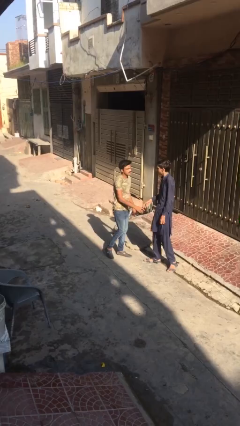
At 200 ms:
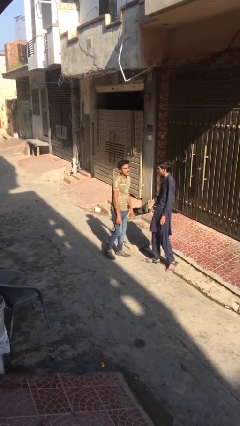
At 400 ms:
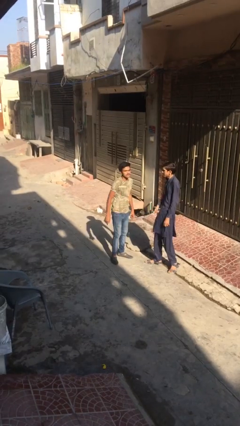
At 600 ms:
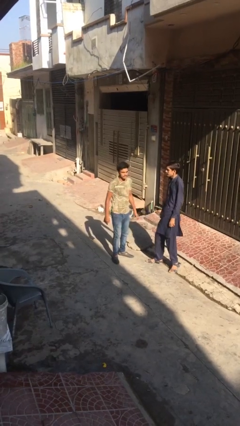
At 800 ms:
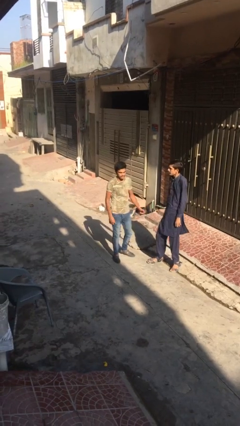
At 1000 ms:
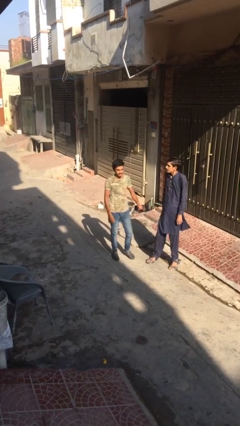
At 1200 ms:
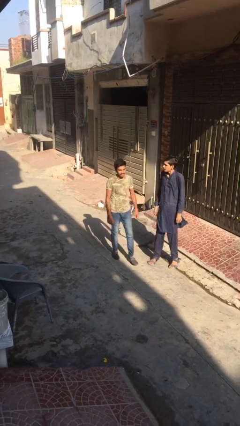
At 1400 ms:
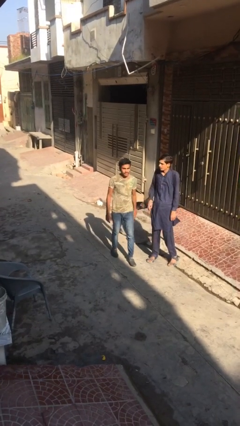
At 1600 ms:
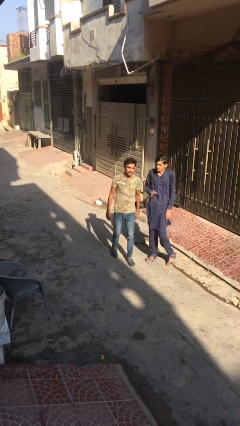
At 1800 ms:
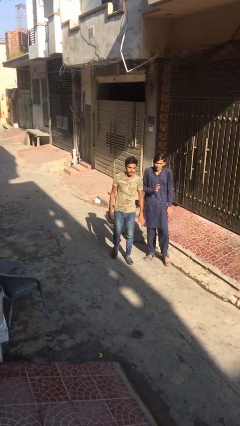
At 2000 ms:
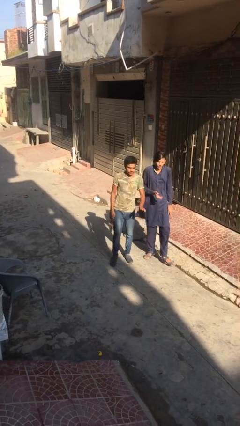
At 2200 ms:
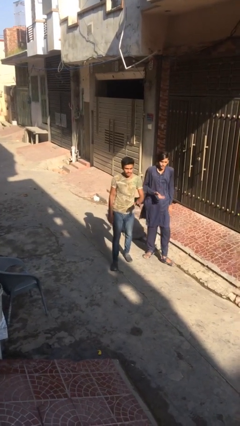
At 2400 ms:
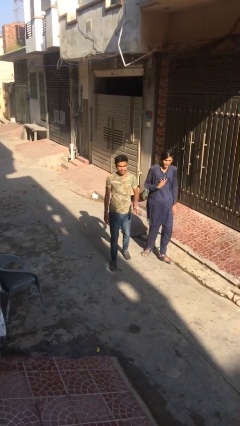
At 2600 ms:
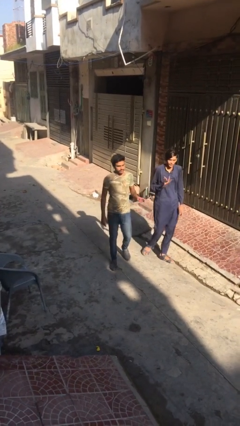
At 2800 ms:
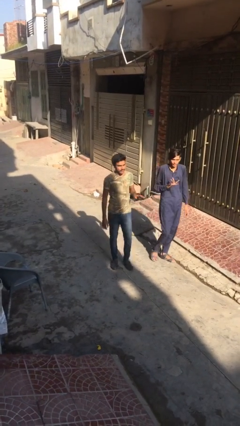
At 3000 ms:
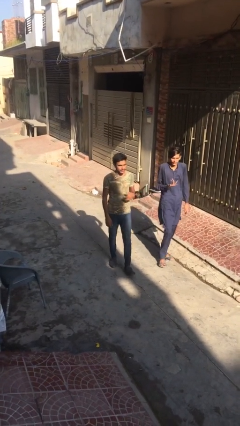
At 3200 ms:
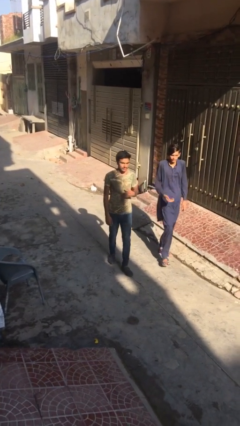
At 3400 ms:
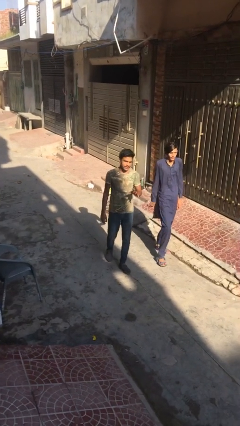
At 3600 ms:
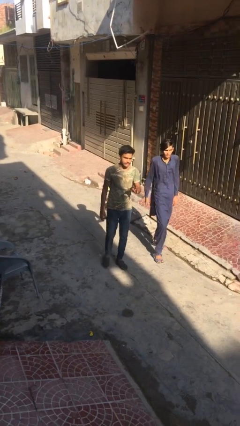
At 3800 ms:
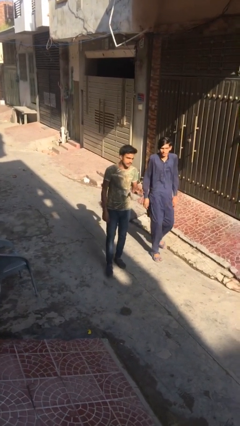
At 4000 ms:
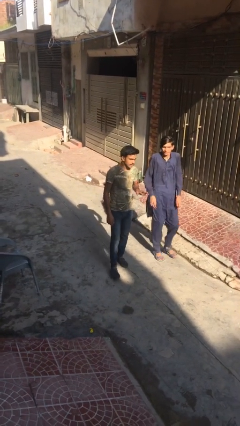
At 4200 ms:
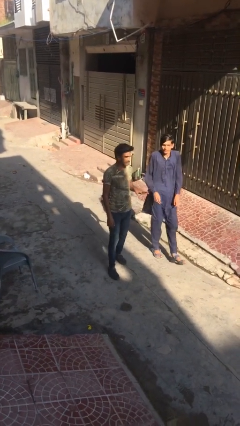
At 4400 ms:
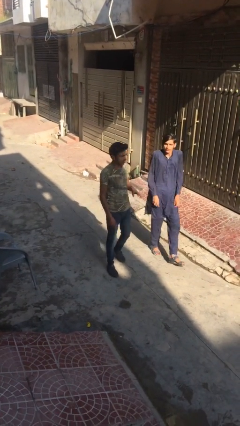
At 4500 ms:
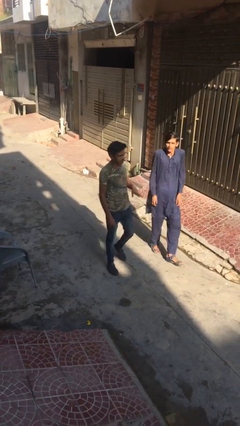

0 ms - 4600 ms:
person talks to person

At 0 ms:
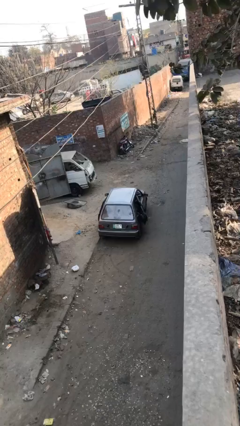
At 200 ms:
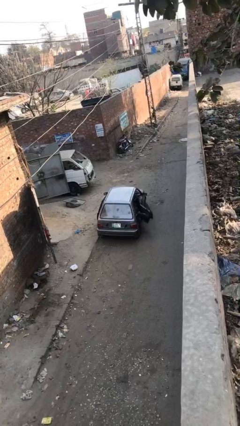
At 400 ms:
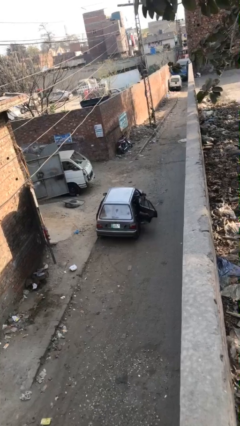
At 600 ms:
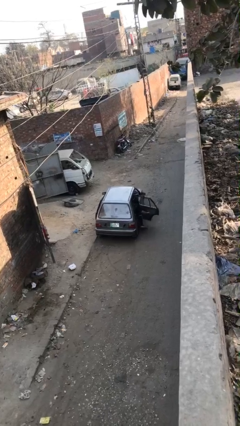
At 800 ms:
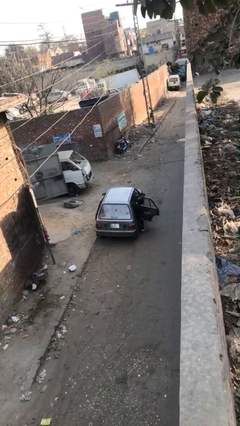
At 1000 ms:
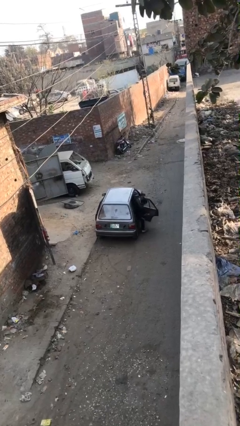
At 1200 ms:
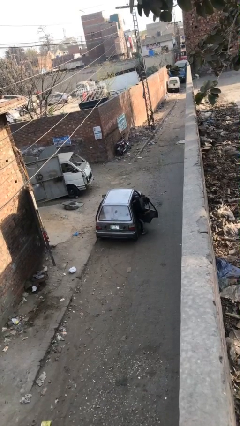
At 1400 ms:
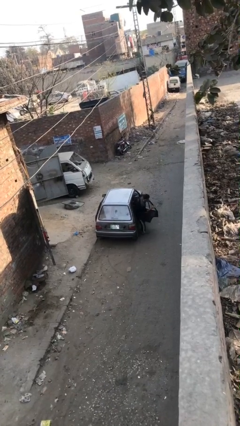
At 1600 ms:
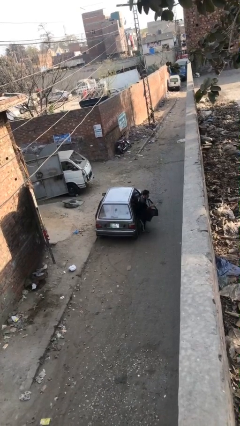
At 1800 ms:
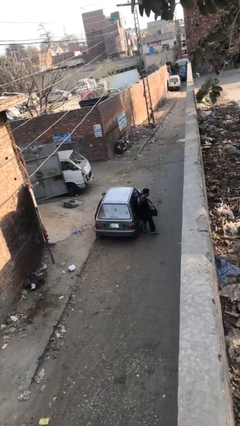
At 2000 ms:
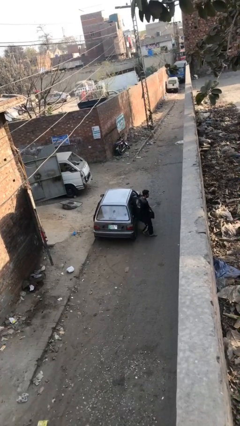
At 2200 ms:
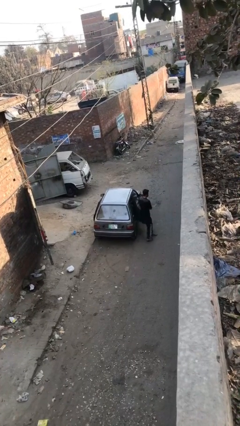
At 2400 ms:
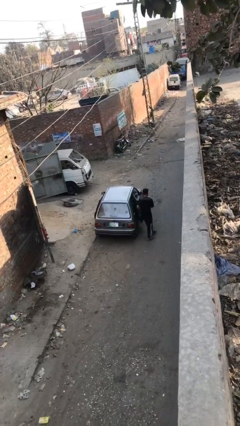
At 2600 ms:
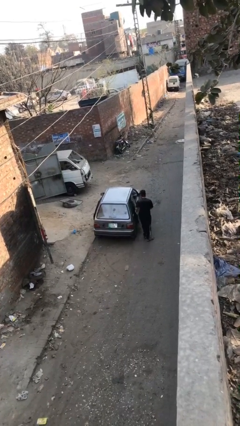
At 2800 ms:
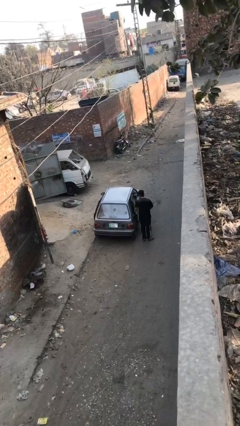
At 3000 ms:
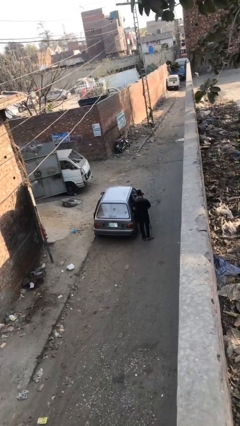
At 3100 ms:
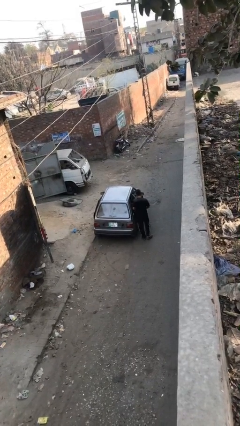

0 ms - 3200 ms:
car drops off person

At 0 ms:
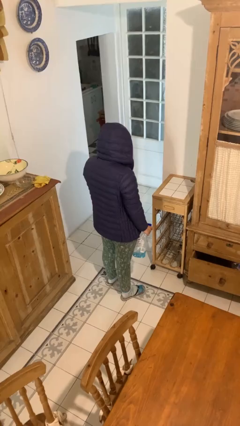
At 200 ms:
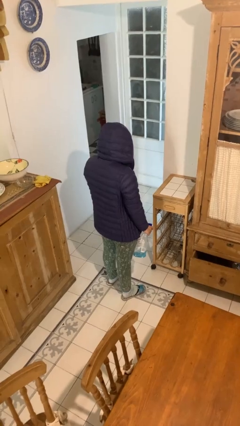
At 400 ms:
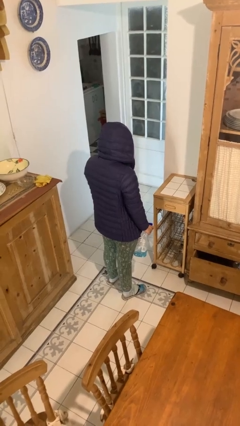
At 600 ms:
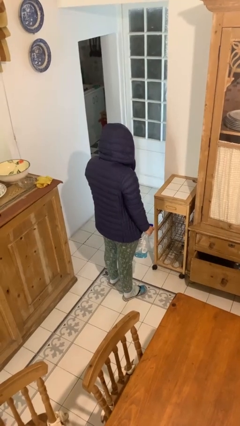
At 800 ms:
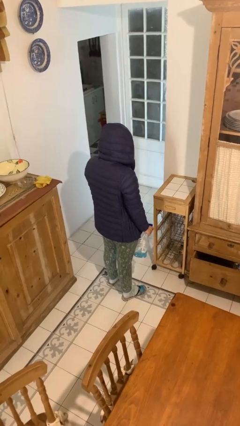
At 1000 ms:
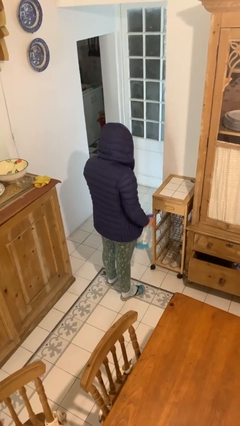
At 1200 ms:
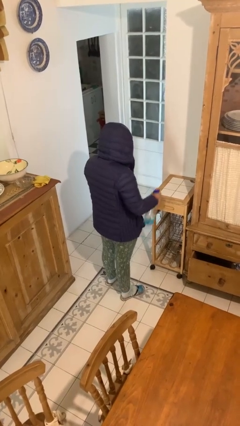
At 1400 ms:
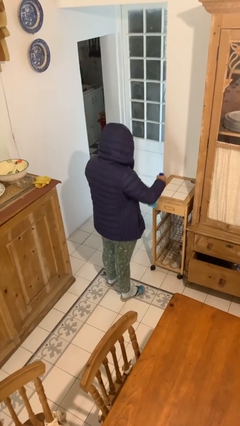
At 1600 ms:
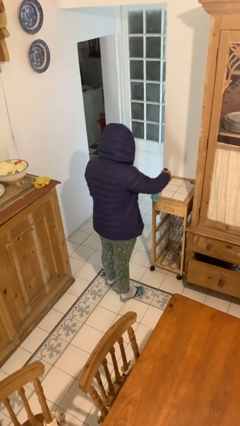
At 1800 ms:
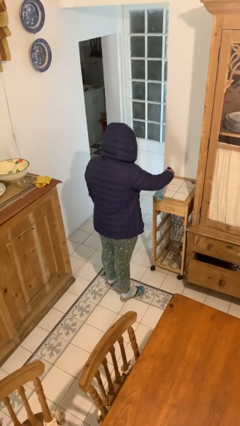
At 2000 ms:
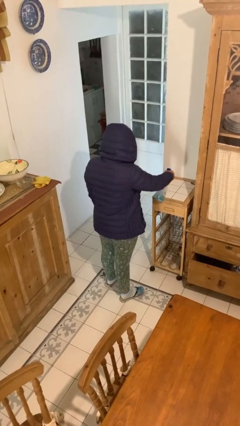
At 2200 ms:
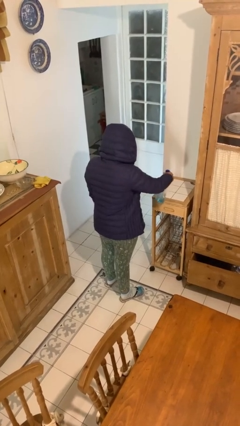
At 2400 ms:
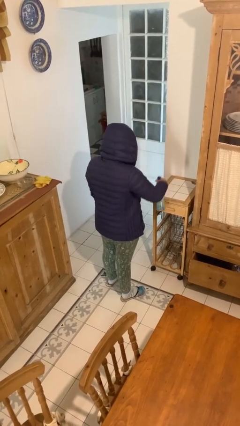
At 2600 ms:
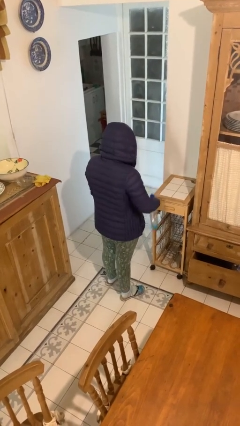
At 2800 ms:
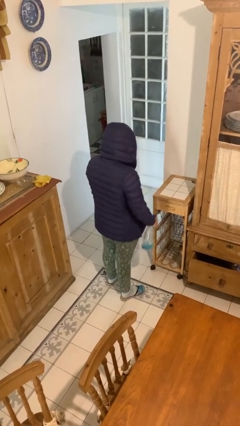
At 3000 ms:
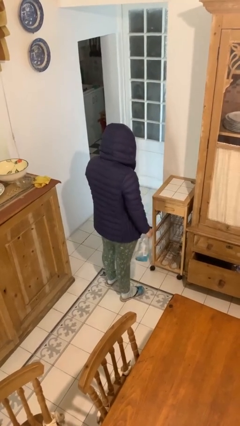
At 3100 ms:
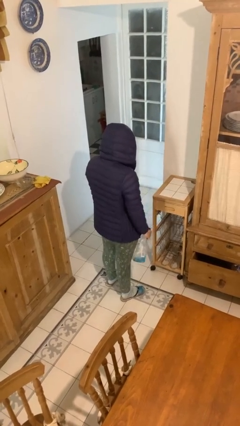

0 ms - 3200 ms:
person sprays from bottle

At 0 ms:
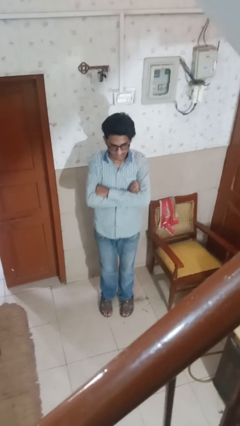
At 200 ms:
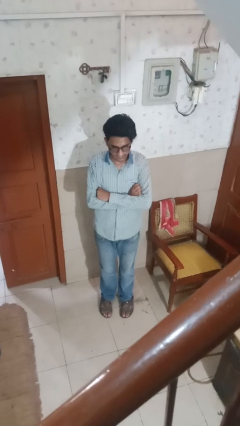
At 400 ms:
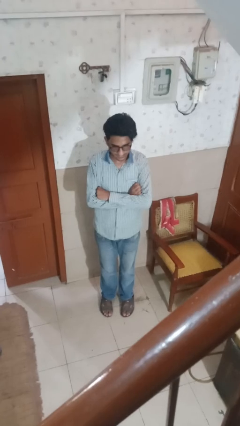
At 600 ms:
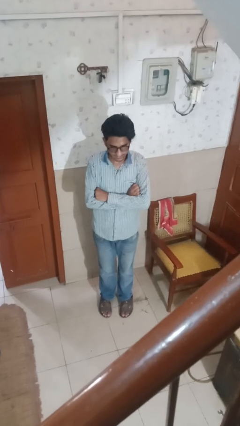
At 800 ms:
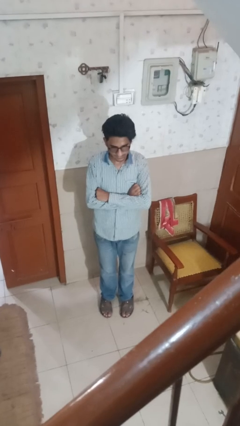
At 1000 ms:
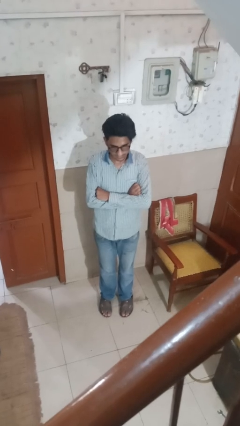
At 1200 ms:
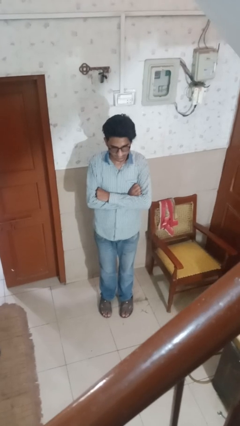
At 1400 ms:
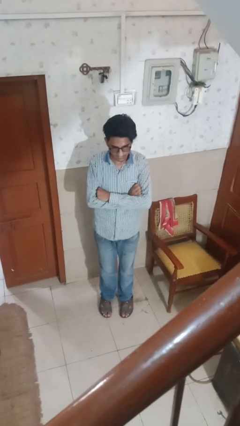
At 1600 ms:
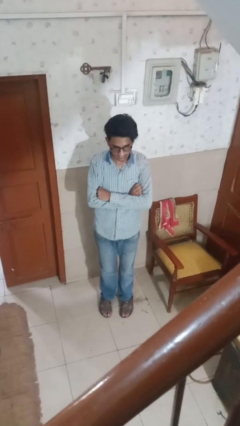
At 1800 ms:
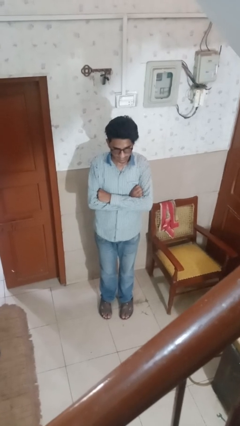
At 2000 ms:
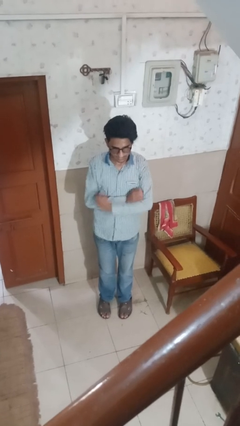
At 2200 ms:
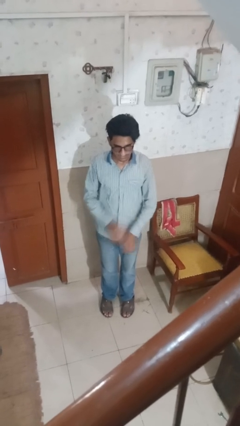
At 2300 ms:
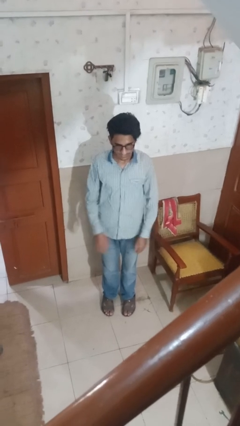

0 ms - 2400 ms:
person crosses arms

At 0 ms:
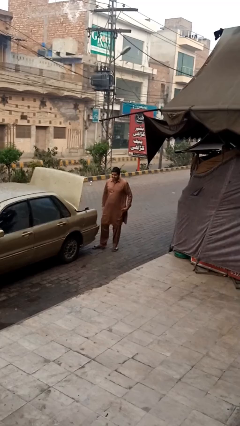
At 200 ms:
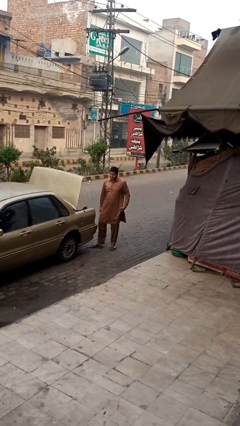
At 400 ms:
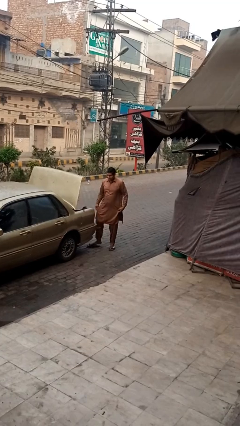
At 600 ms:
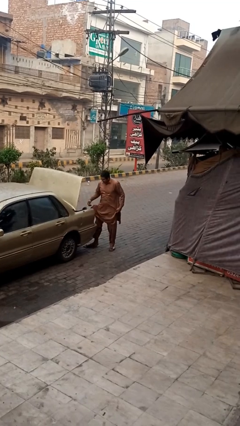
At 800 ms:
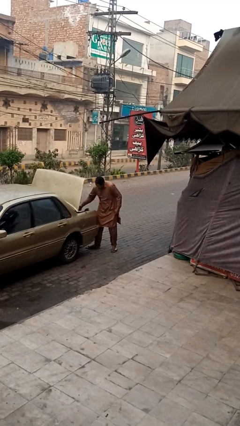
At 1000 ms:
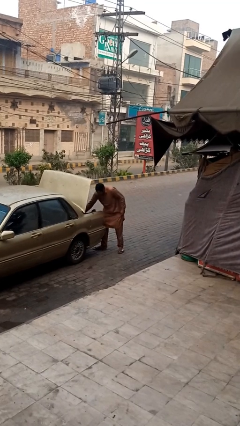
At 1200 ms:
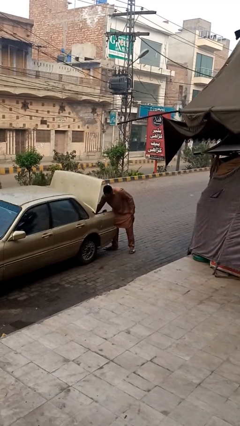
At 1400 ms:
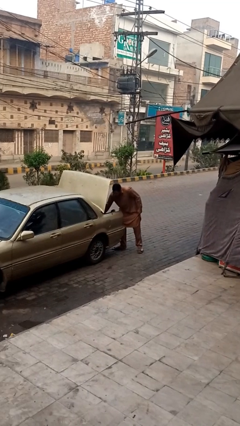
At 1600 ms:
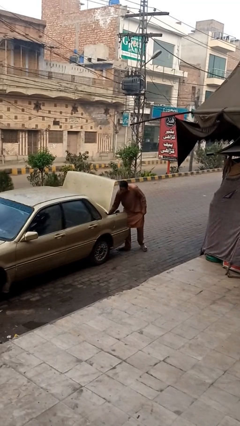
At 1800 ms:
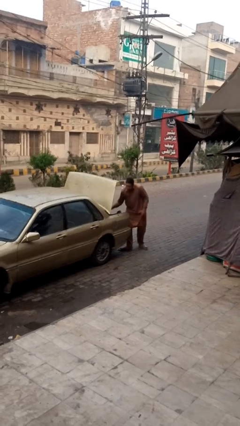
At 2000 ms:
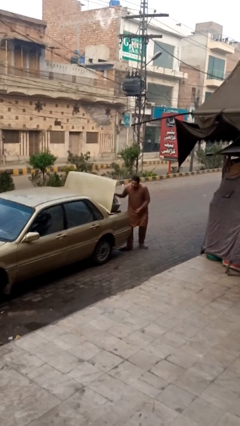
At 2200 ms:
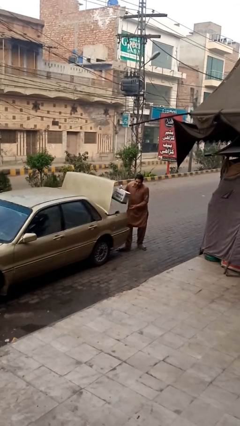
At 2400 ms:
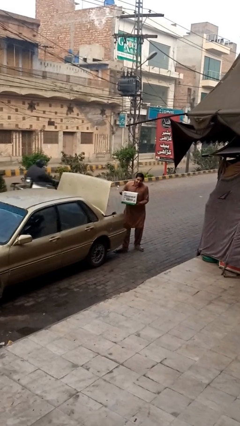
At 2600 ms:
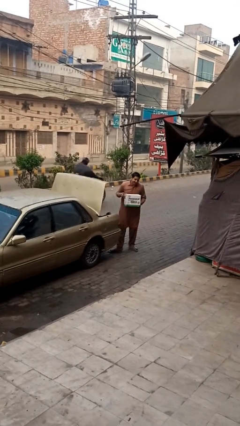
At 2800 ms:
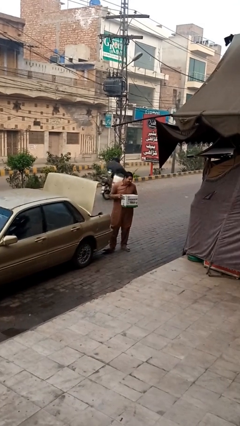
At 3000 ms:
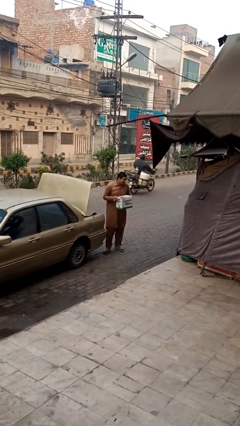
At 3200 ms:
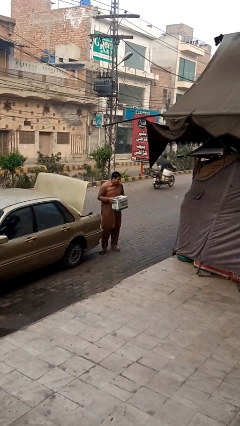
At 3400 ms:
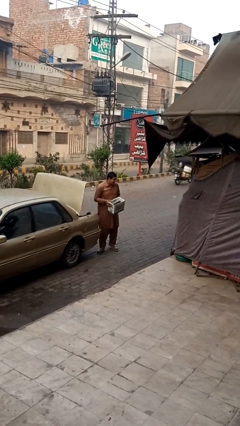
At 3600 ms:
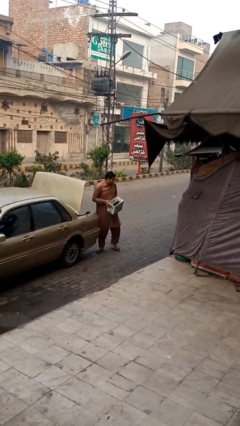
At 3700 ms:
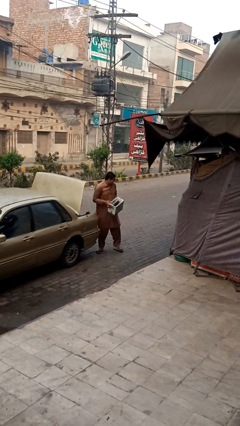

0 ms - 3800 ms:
person unloads car

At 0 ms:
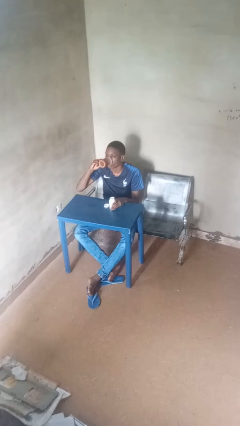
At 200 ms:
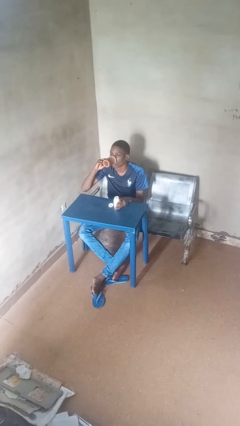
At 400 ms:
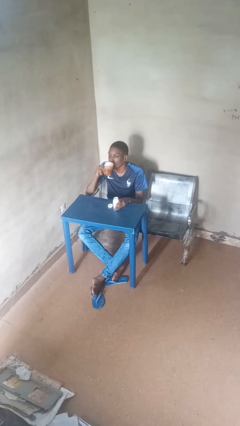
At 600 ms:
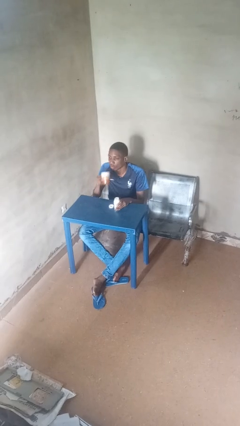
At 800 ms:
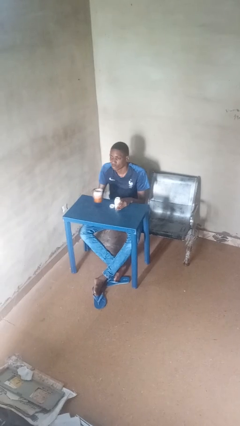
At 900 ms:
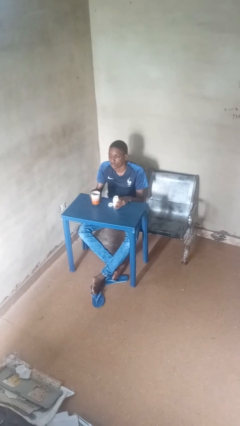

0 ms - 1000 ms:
person drinks from cup
